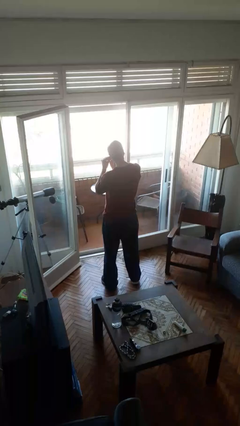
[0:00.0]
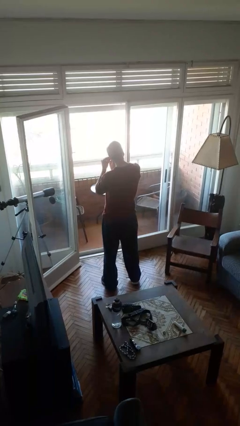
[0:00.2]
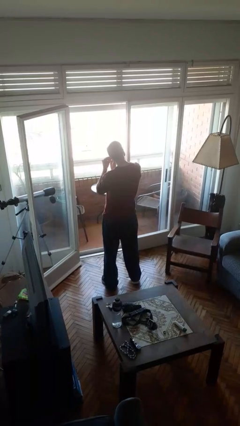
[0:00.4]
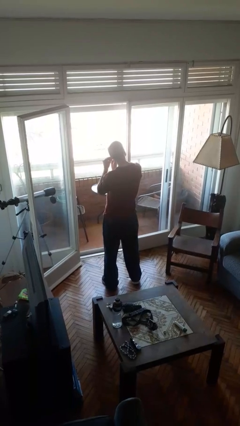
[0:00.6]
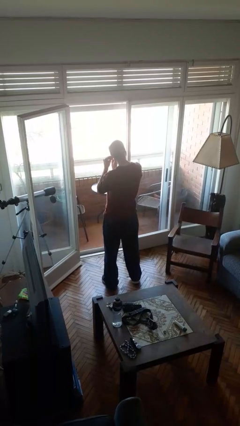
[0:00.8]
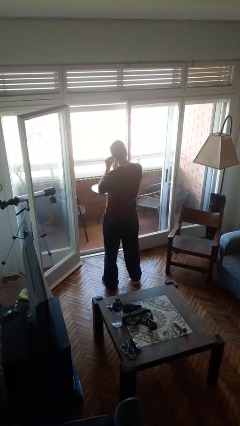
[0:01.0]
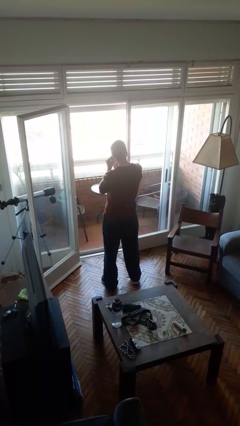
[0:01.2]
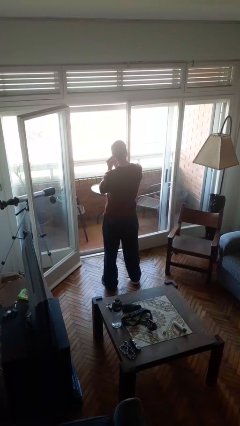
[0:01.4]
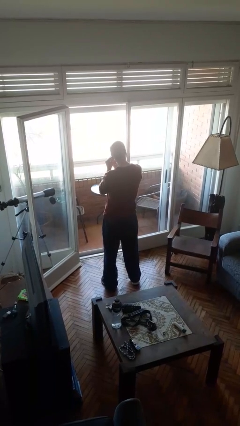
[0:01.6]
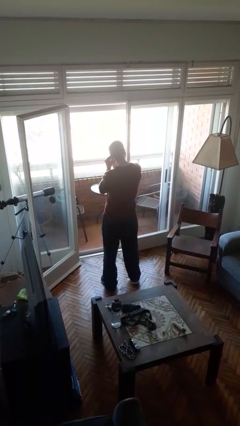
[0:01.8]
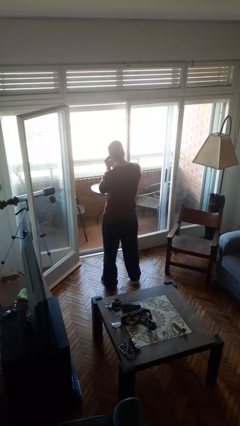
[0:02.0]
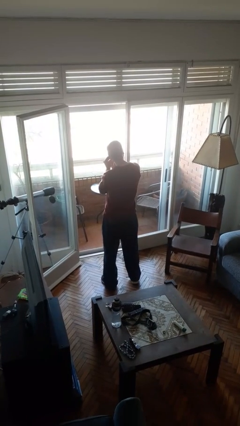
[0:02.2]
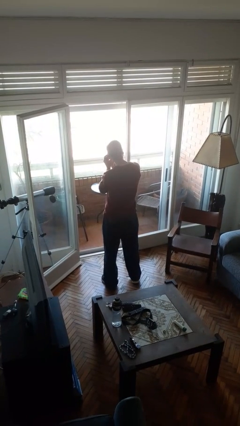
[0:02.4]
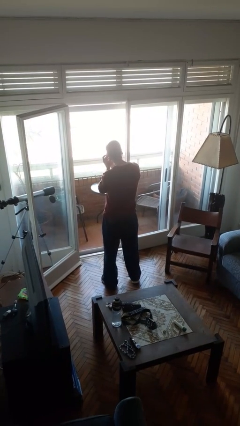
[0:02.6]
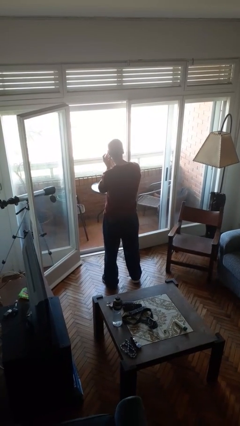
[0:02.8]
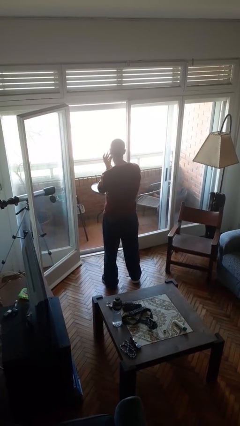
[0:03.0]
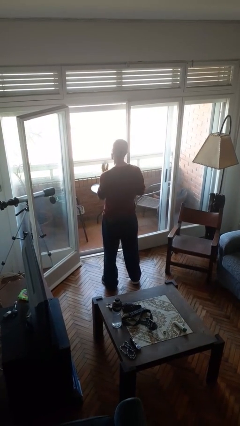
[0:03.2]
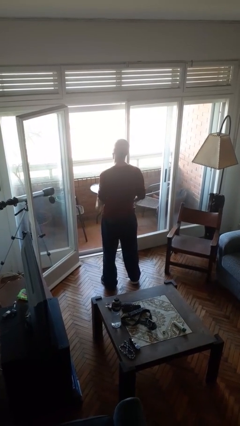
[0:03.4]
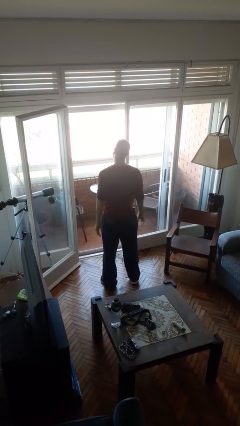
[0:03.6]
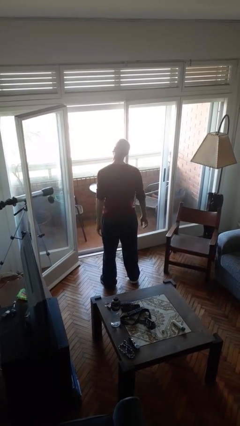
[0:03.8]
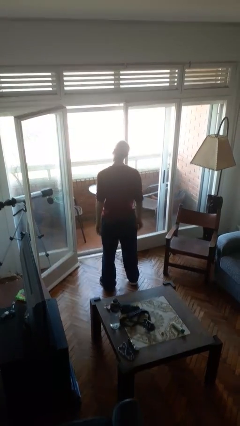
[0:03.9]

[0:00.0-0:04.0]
person puts on earrings

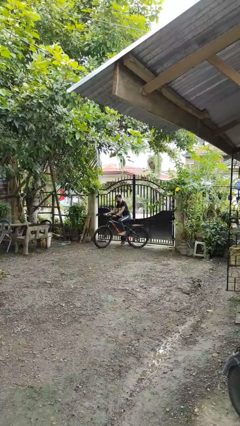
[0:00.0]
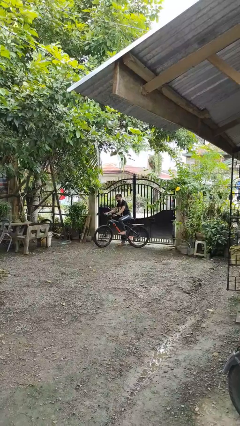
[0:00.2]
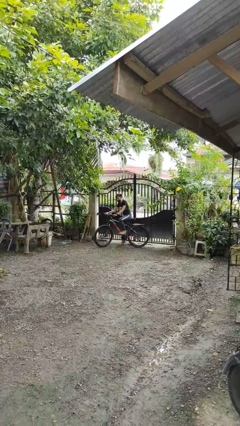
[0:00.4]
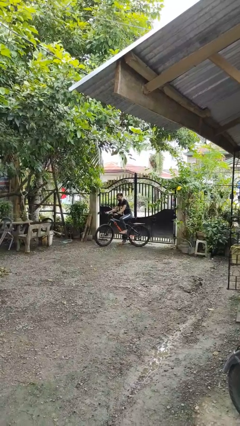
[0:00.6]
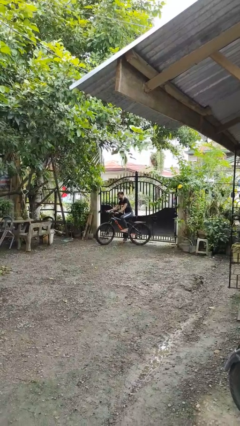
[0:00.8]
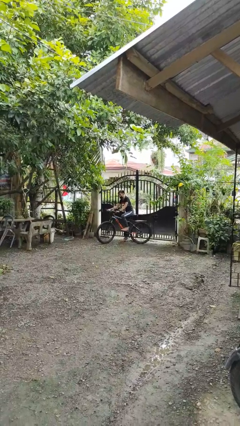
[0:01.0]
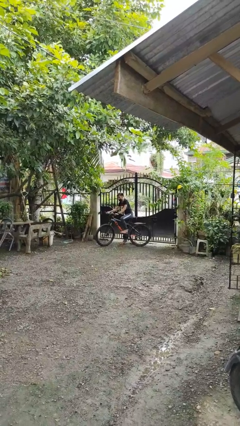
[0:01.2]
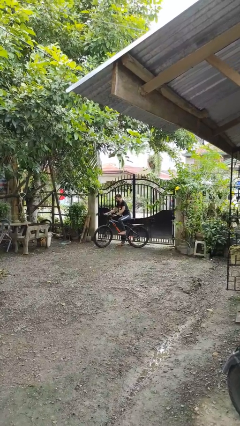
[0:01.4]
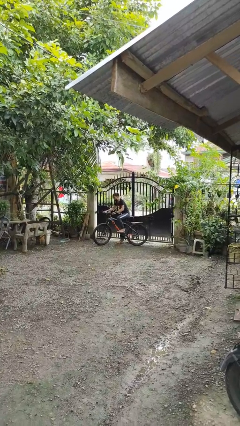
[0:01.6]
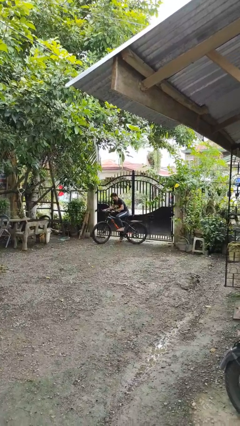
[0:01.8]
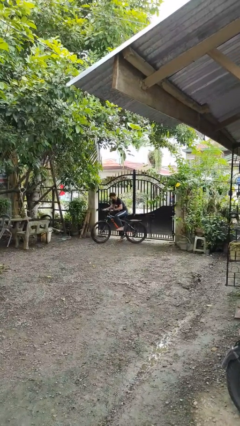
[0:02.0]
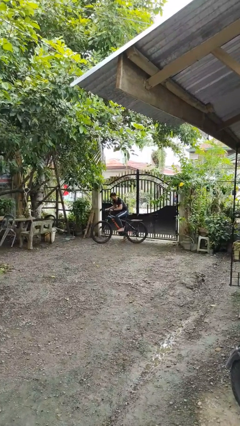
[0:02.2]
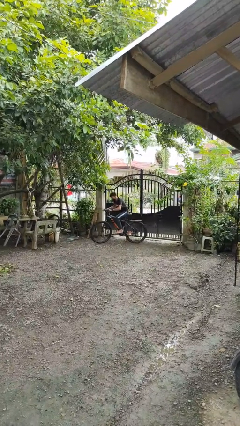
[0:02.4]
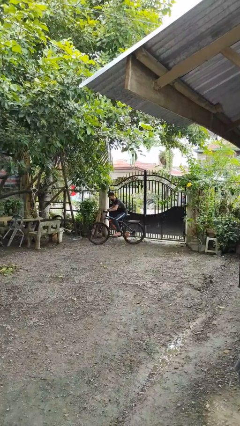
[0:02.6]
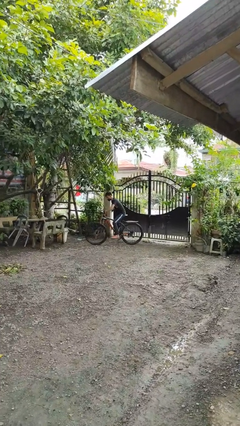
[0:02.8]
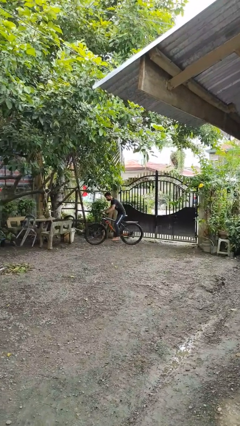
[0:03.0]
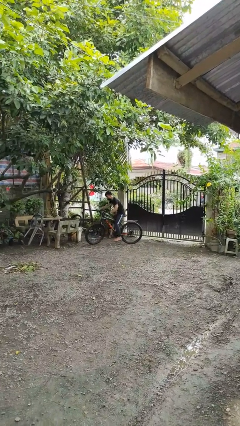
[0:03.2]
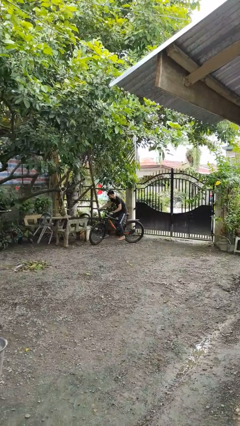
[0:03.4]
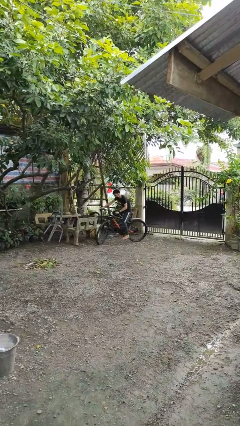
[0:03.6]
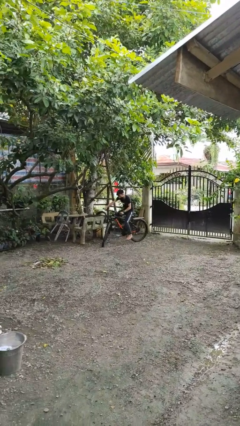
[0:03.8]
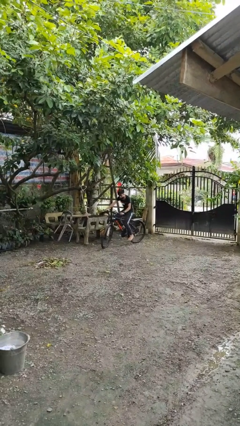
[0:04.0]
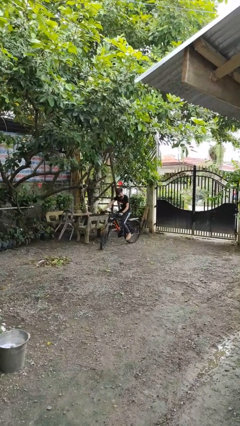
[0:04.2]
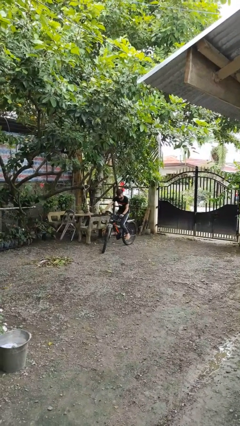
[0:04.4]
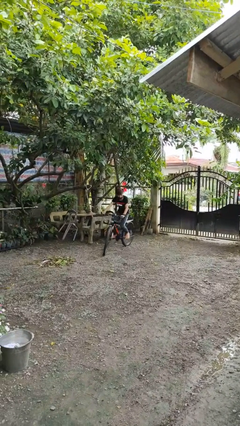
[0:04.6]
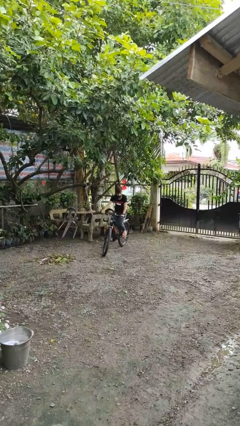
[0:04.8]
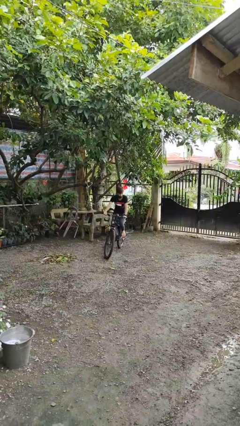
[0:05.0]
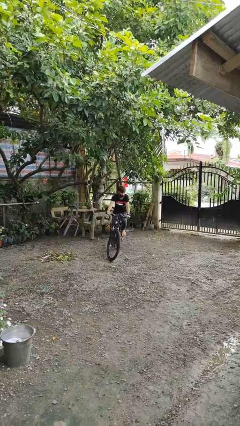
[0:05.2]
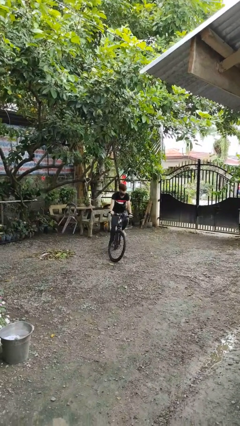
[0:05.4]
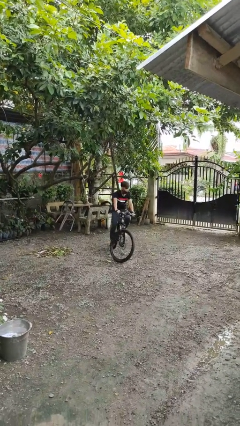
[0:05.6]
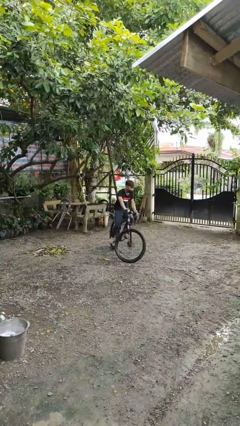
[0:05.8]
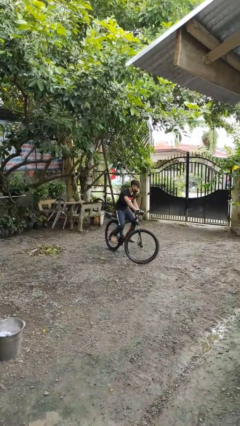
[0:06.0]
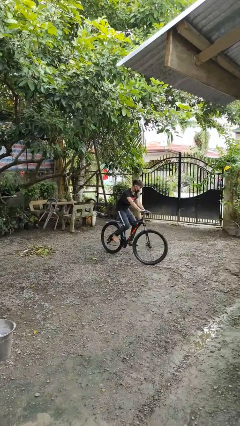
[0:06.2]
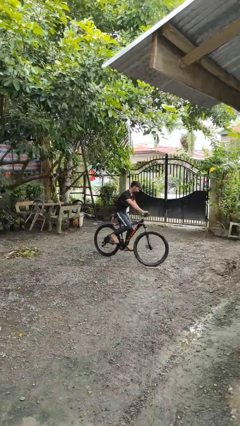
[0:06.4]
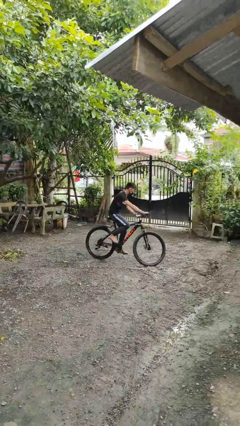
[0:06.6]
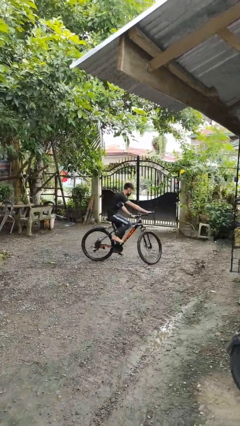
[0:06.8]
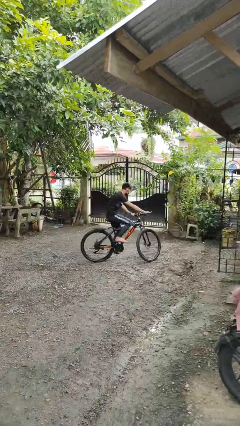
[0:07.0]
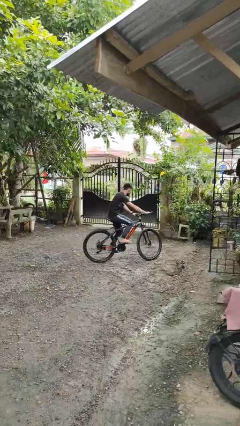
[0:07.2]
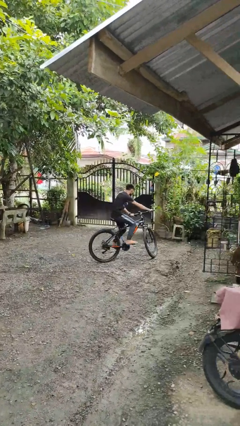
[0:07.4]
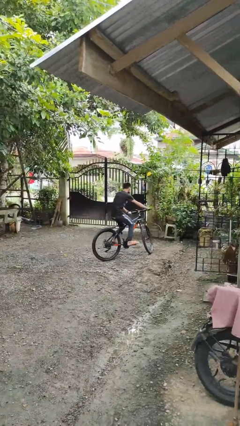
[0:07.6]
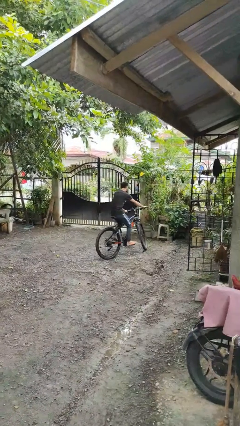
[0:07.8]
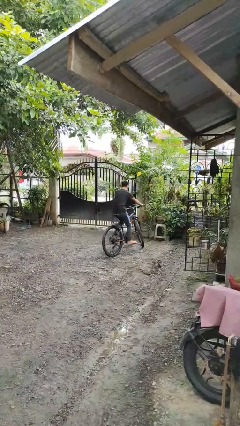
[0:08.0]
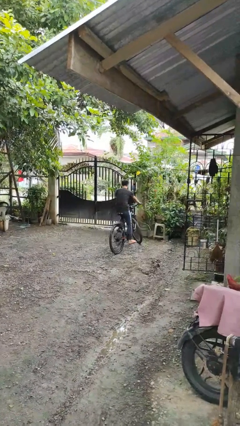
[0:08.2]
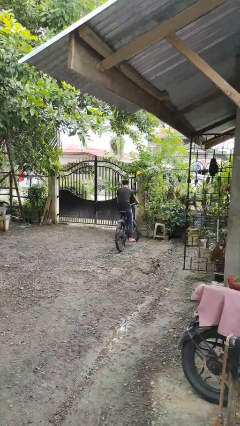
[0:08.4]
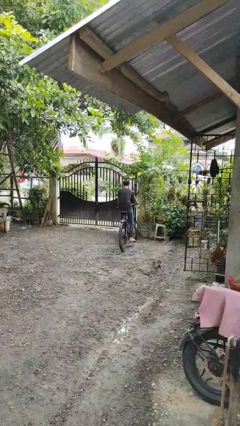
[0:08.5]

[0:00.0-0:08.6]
person rides bicycle

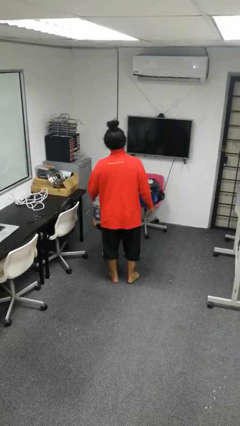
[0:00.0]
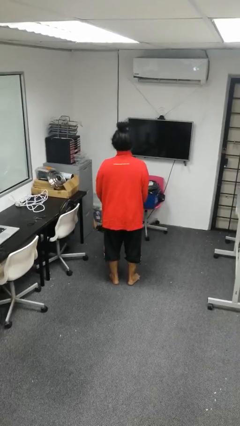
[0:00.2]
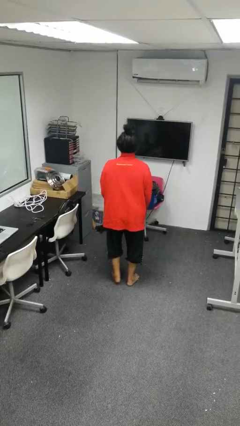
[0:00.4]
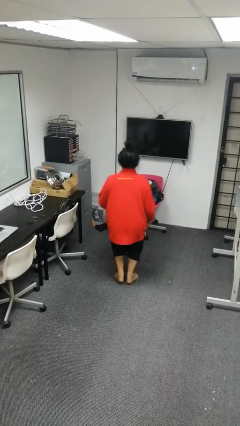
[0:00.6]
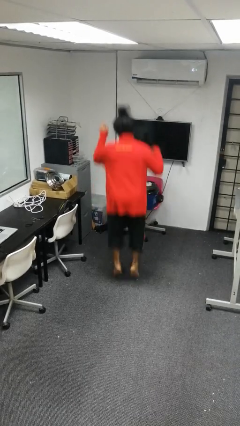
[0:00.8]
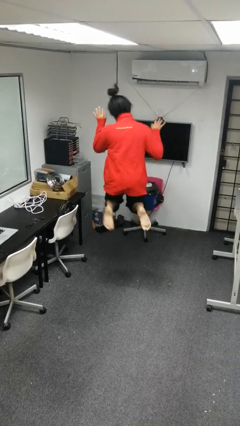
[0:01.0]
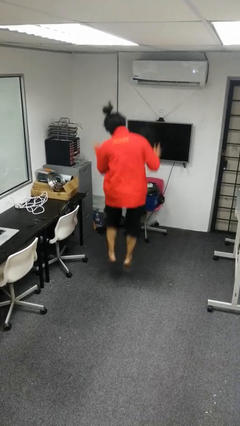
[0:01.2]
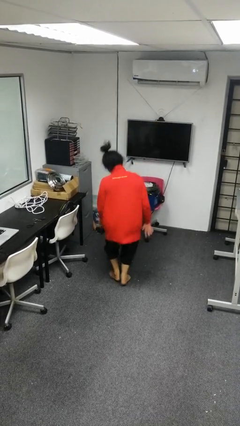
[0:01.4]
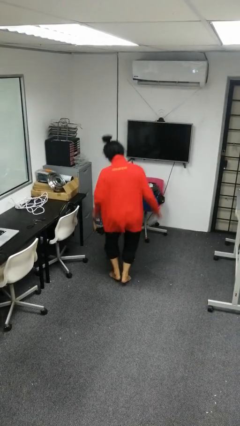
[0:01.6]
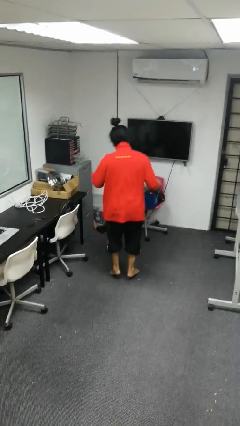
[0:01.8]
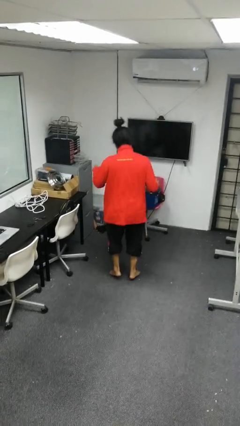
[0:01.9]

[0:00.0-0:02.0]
person jumps

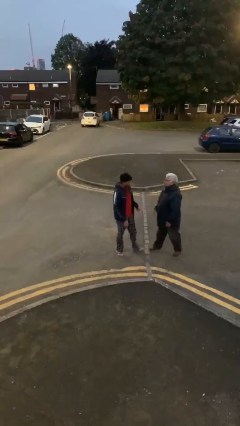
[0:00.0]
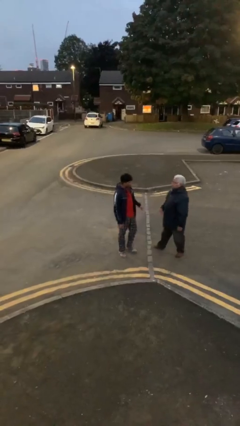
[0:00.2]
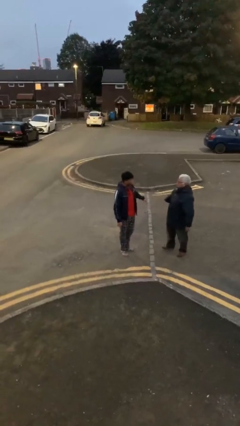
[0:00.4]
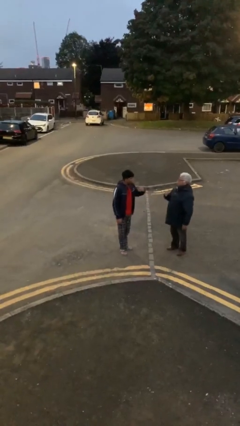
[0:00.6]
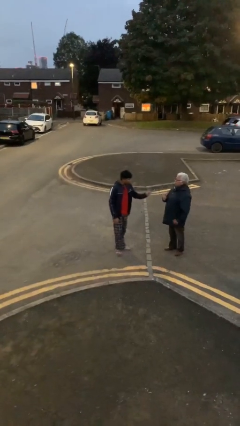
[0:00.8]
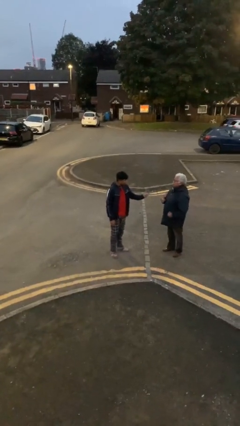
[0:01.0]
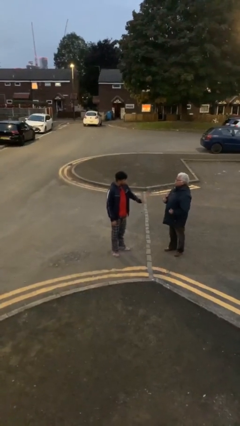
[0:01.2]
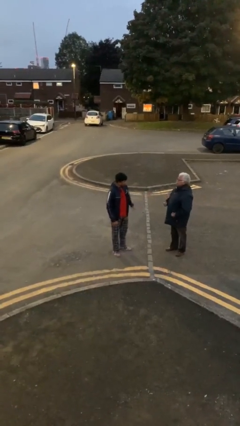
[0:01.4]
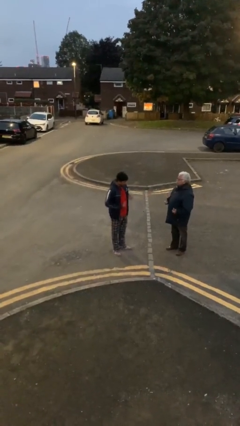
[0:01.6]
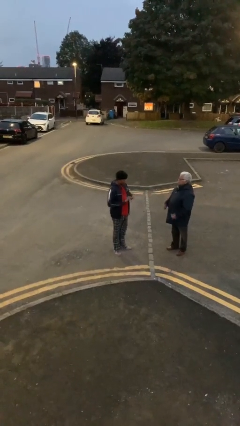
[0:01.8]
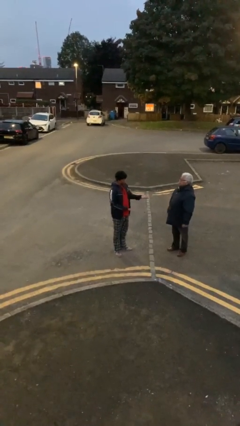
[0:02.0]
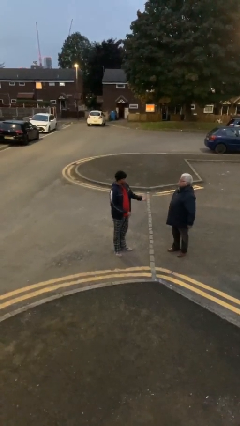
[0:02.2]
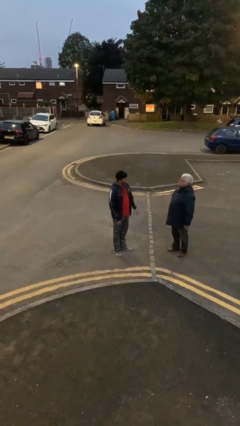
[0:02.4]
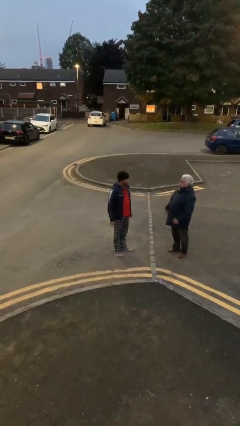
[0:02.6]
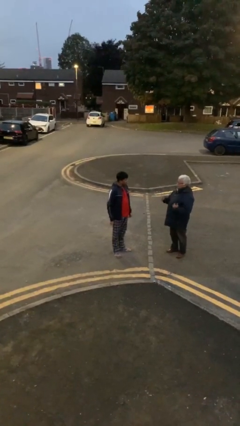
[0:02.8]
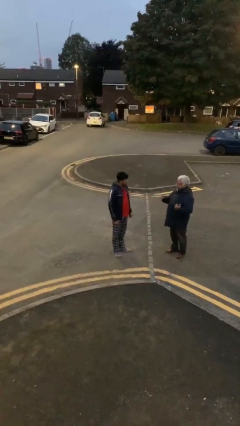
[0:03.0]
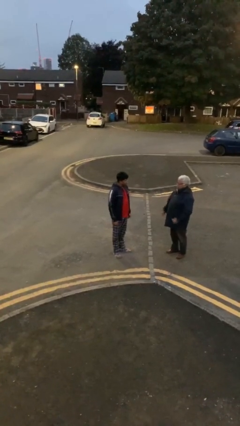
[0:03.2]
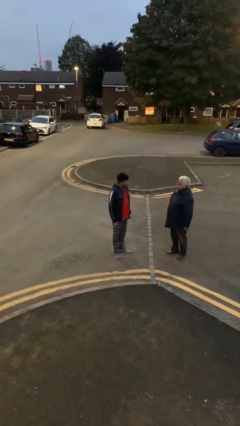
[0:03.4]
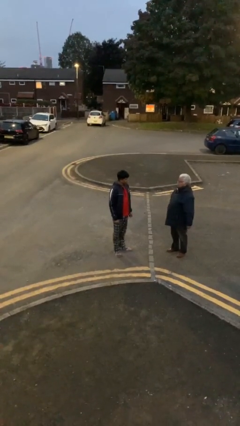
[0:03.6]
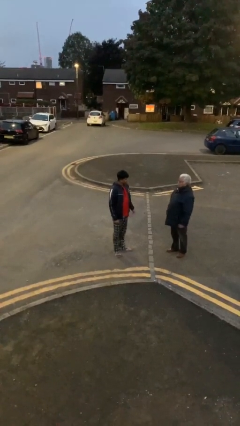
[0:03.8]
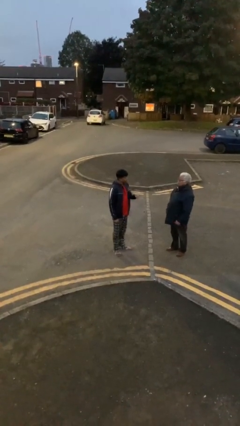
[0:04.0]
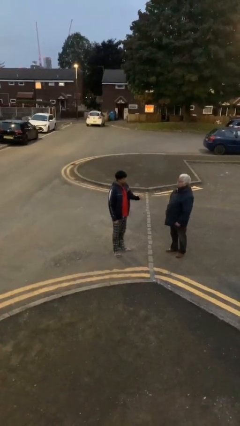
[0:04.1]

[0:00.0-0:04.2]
person talks to person
